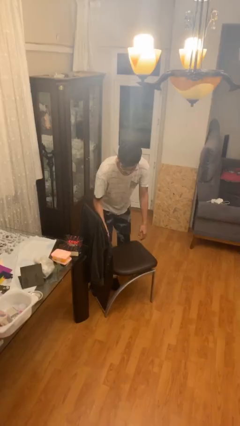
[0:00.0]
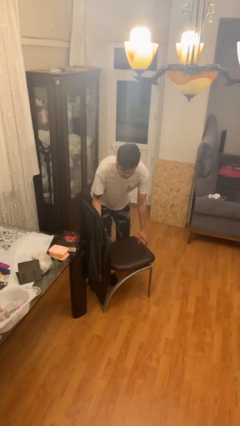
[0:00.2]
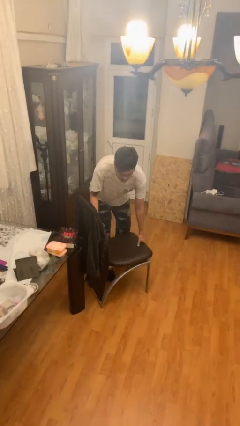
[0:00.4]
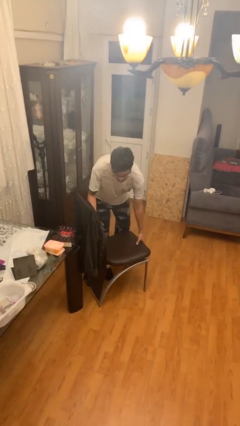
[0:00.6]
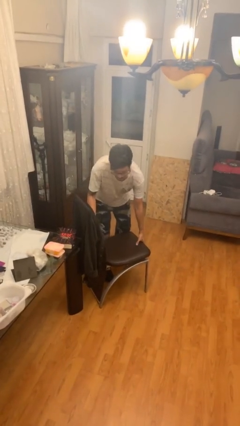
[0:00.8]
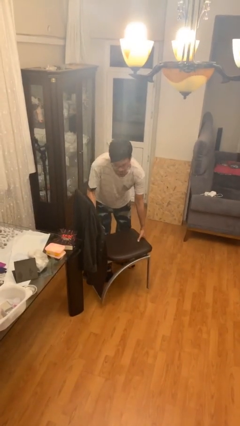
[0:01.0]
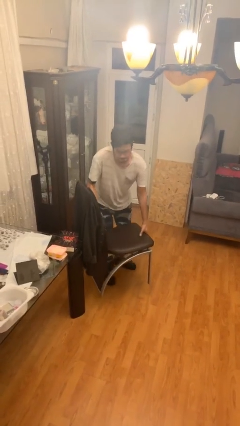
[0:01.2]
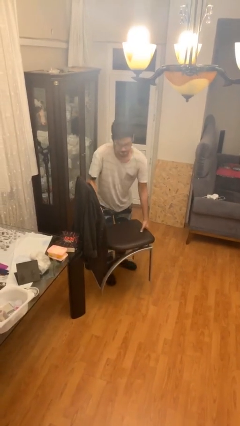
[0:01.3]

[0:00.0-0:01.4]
person picks up object from floor

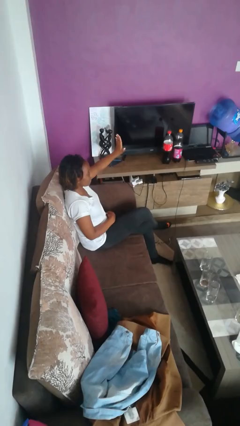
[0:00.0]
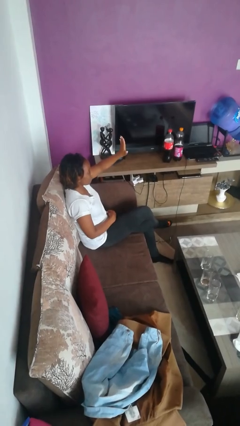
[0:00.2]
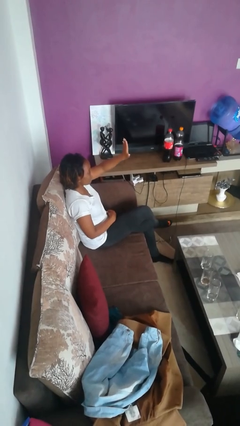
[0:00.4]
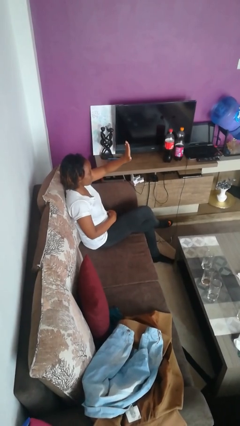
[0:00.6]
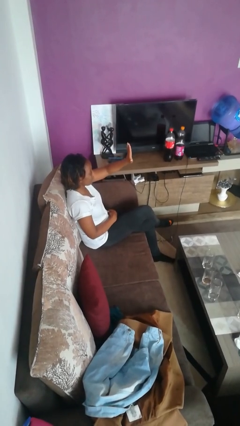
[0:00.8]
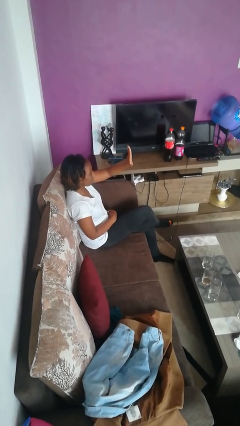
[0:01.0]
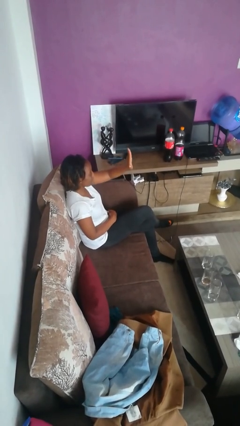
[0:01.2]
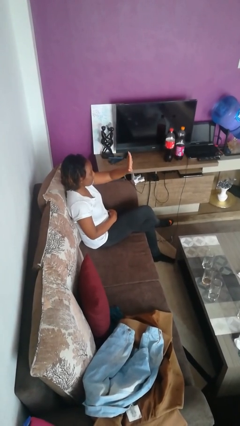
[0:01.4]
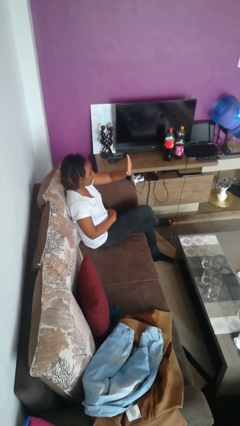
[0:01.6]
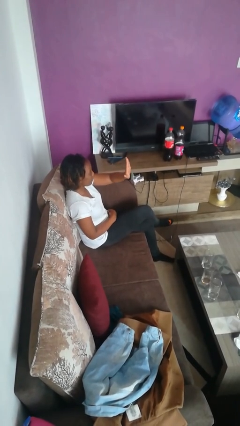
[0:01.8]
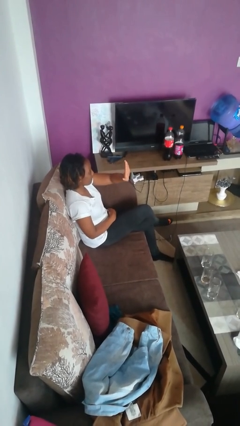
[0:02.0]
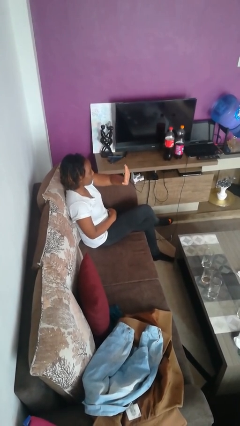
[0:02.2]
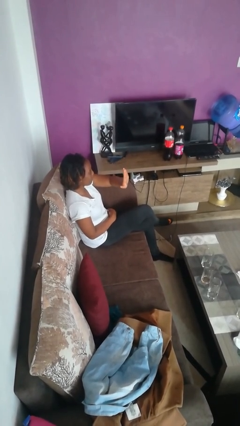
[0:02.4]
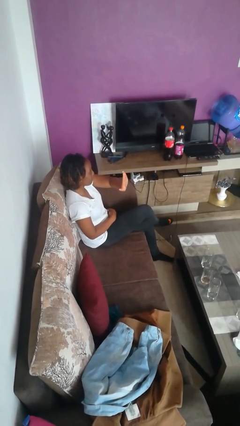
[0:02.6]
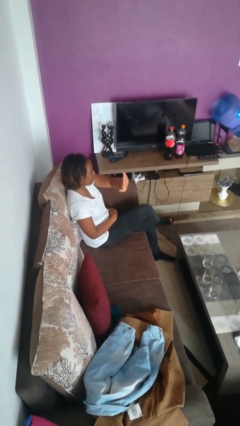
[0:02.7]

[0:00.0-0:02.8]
person gestures swipe right

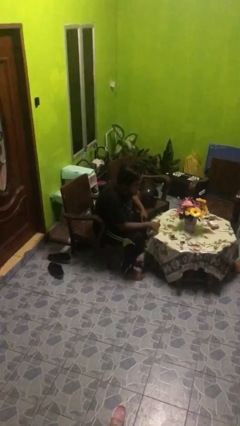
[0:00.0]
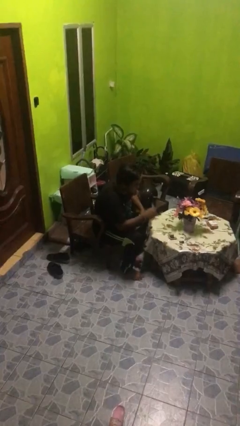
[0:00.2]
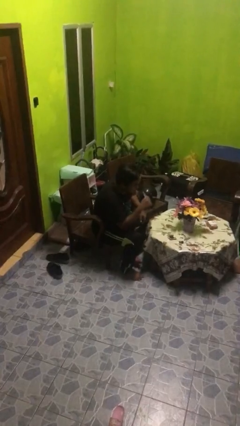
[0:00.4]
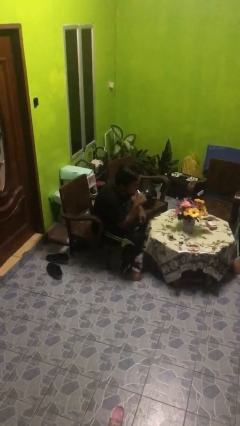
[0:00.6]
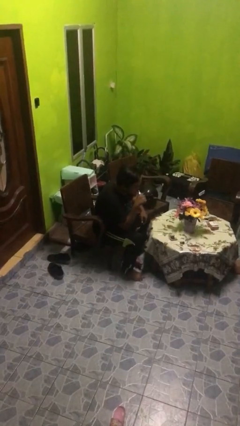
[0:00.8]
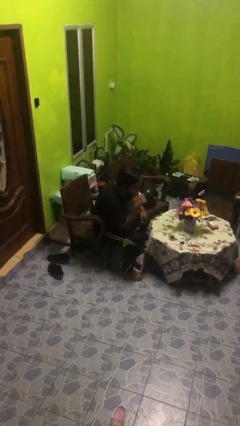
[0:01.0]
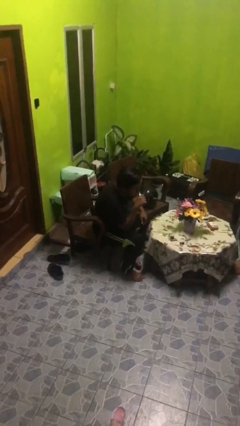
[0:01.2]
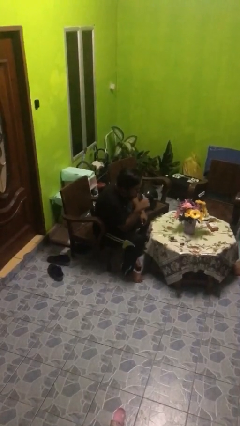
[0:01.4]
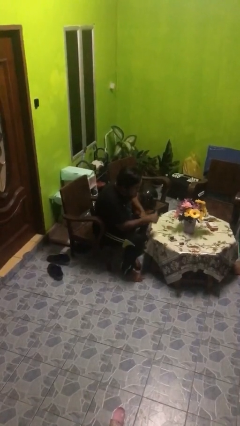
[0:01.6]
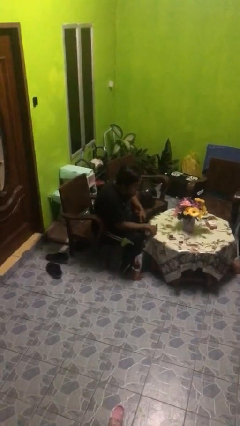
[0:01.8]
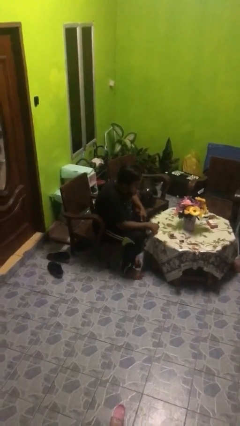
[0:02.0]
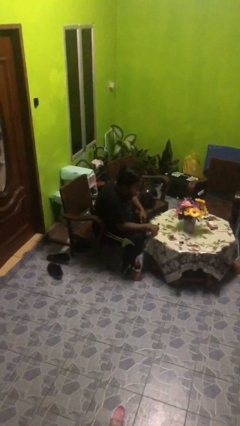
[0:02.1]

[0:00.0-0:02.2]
person vapes

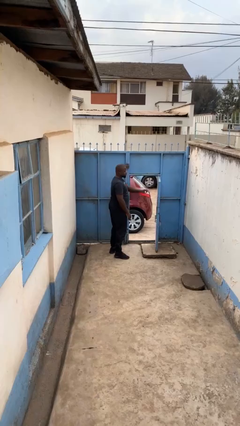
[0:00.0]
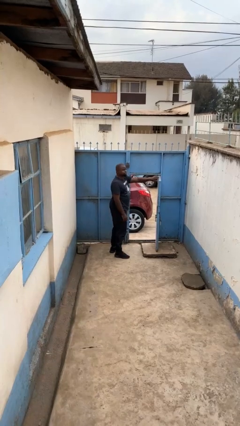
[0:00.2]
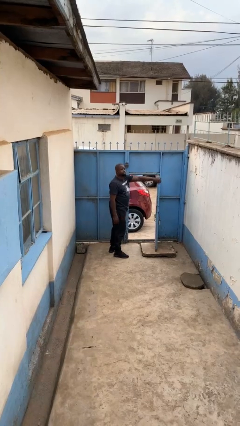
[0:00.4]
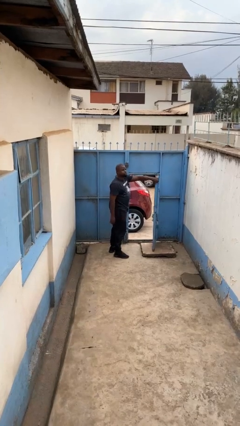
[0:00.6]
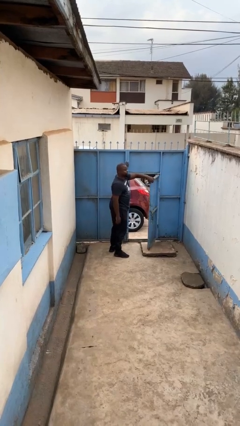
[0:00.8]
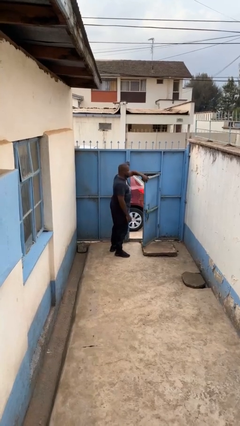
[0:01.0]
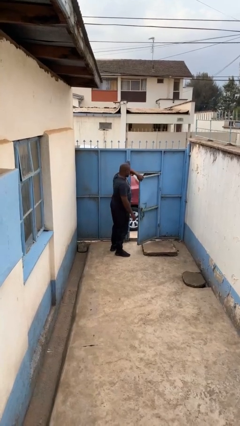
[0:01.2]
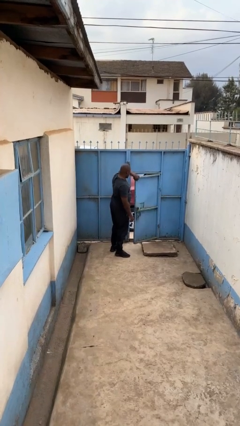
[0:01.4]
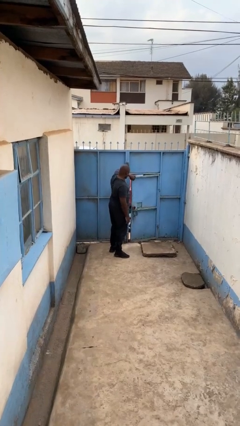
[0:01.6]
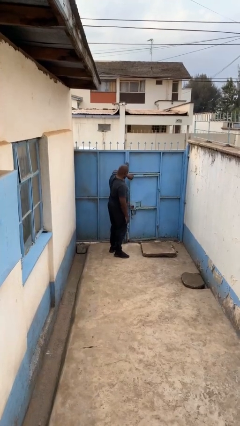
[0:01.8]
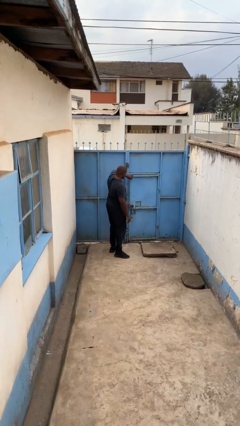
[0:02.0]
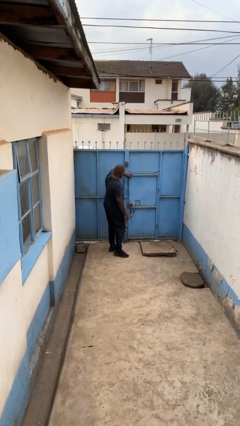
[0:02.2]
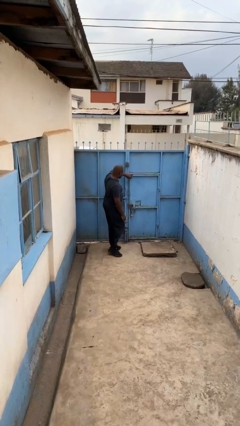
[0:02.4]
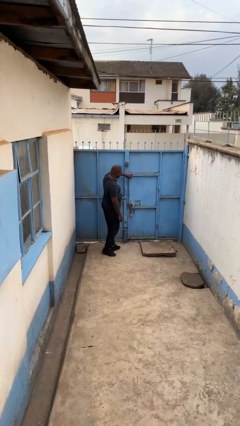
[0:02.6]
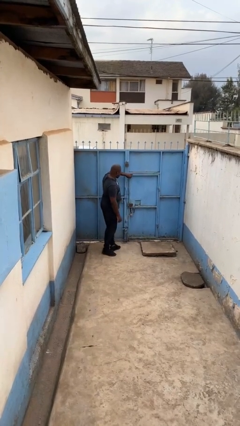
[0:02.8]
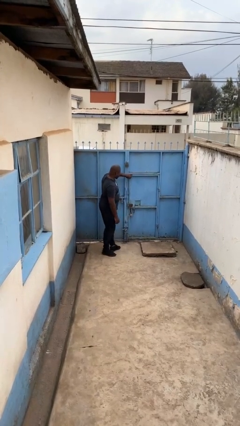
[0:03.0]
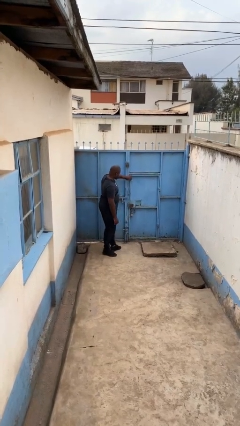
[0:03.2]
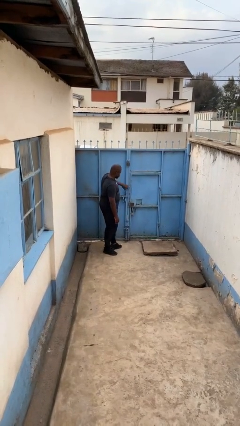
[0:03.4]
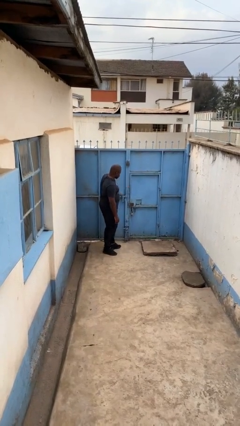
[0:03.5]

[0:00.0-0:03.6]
person closes gate

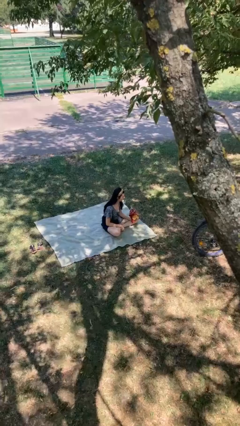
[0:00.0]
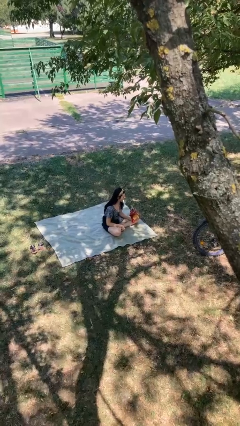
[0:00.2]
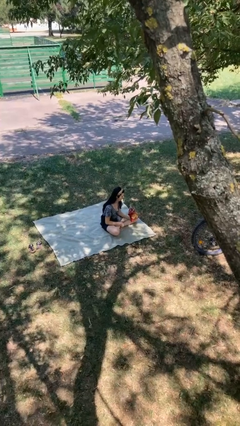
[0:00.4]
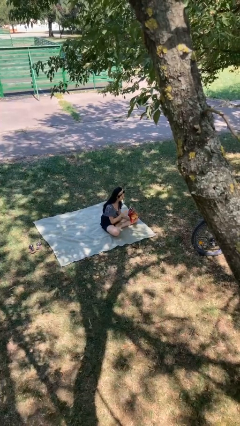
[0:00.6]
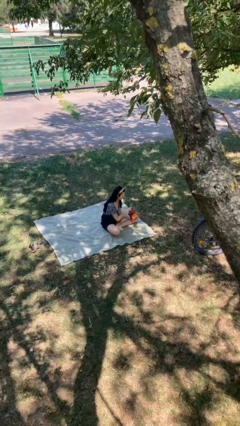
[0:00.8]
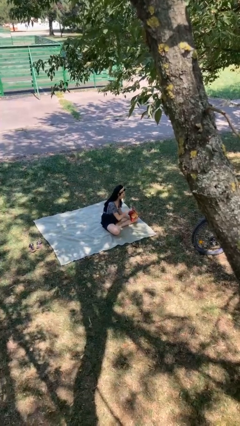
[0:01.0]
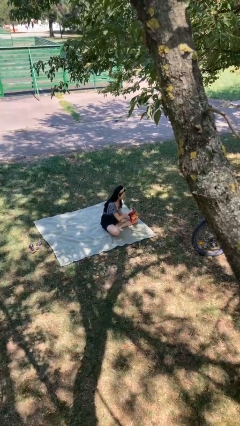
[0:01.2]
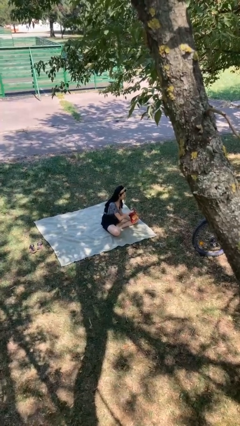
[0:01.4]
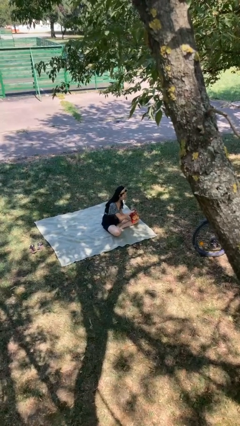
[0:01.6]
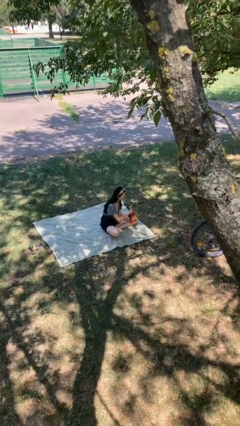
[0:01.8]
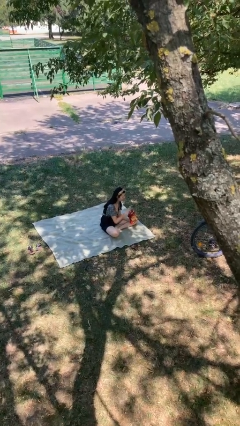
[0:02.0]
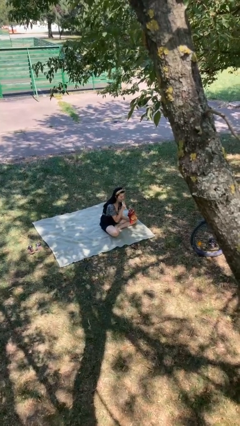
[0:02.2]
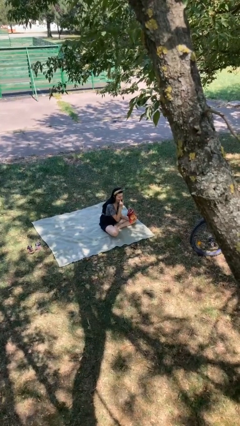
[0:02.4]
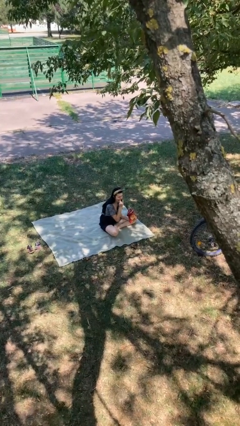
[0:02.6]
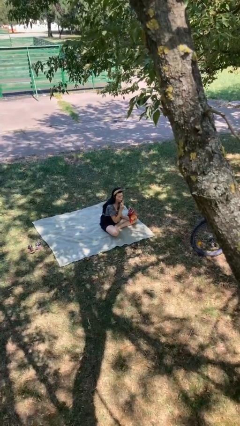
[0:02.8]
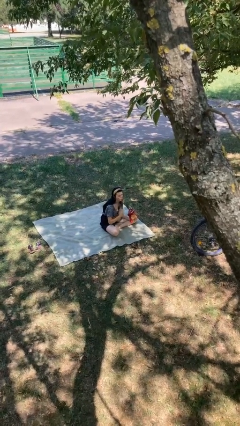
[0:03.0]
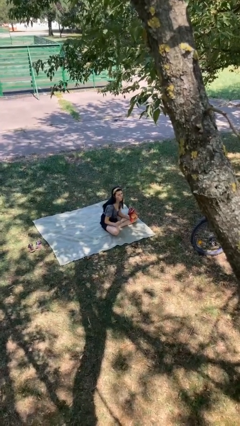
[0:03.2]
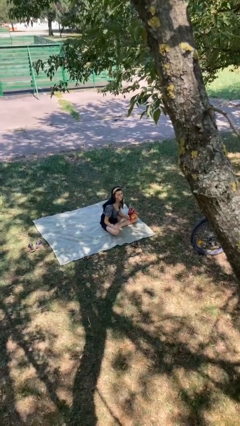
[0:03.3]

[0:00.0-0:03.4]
person eats snack from bag

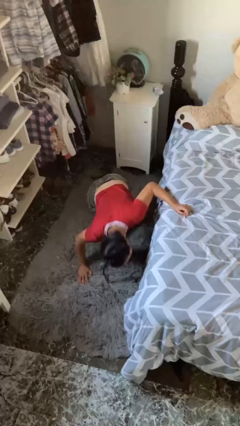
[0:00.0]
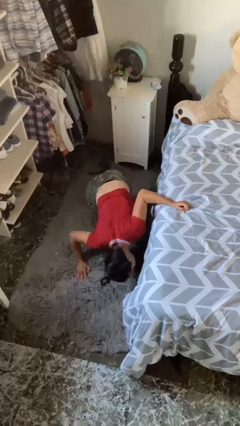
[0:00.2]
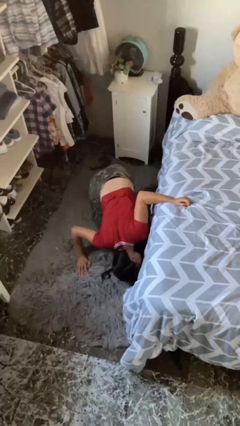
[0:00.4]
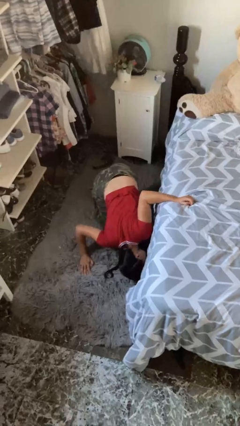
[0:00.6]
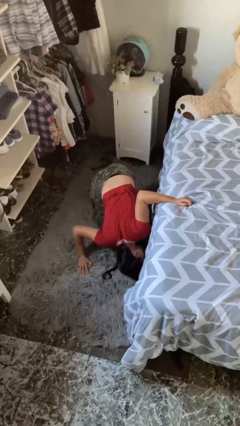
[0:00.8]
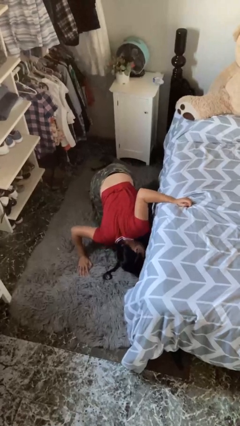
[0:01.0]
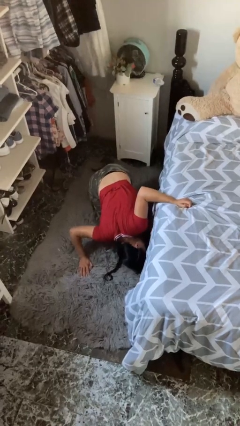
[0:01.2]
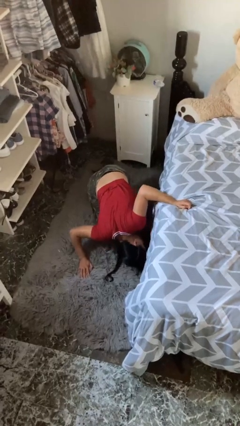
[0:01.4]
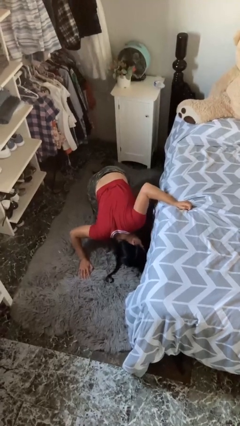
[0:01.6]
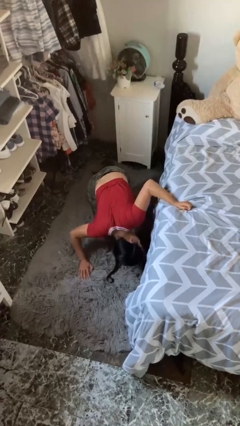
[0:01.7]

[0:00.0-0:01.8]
person searches under bed

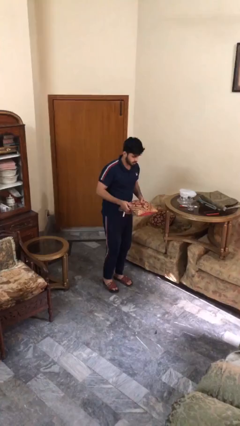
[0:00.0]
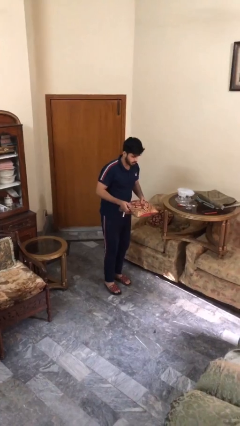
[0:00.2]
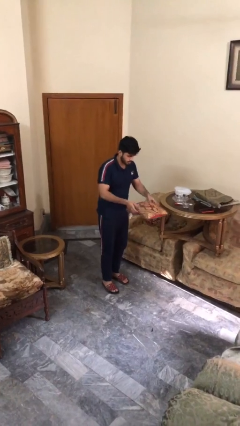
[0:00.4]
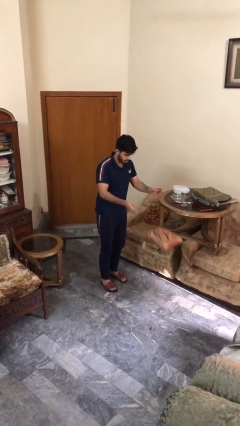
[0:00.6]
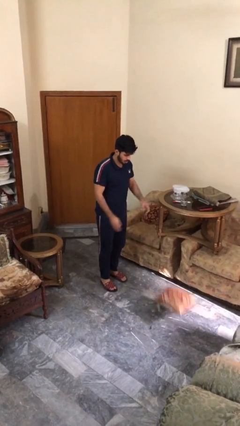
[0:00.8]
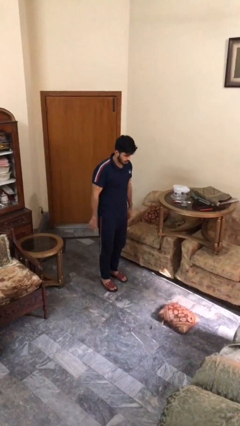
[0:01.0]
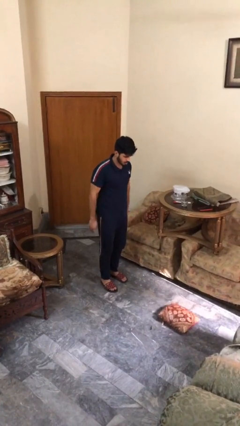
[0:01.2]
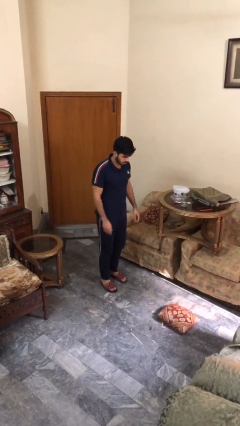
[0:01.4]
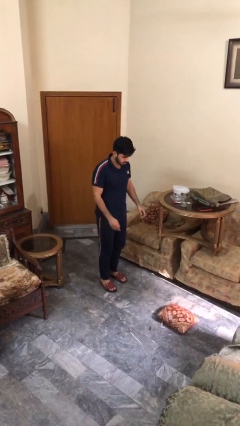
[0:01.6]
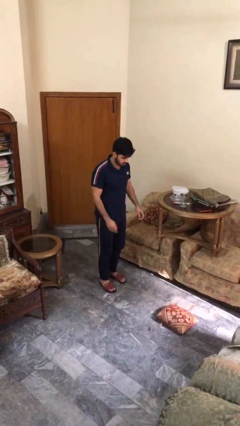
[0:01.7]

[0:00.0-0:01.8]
person throws object to ground
